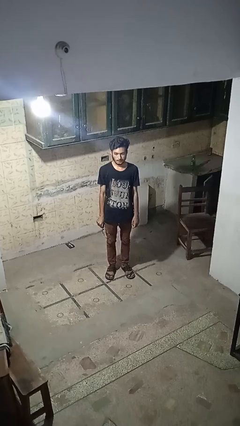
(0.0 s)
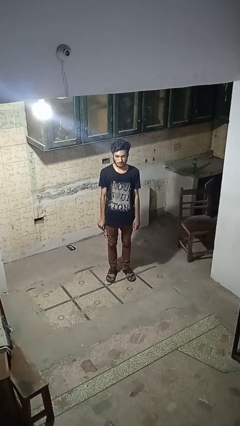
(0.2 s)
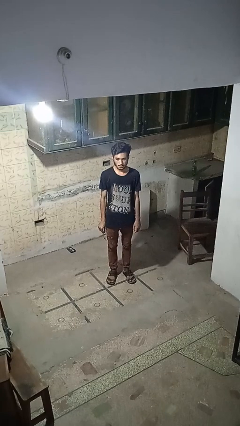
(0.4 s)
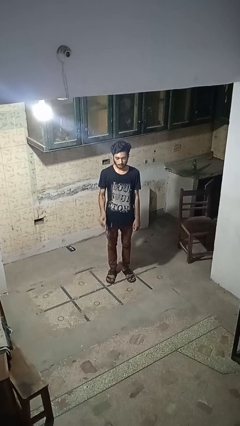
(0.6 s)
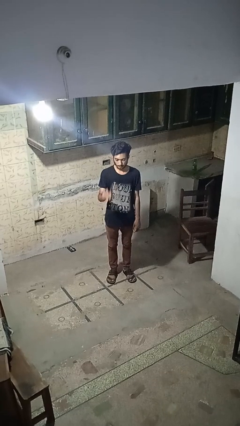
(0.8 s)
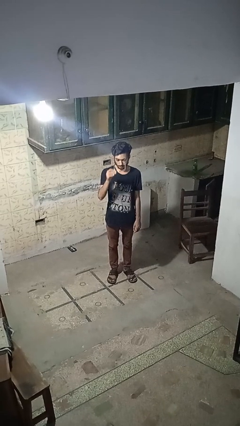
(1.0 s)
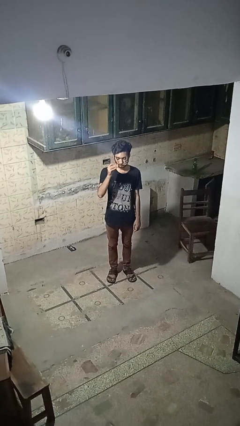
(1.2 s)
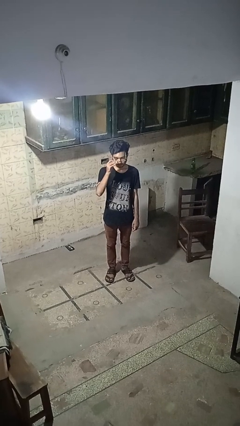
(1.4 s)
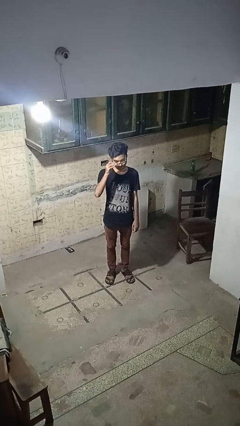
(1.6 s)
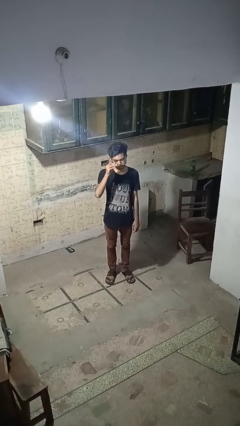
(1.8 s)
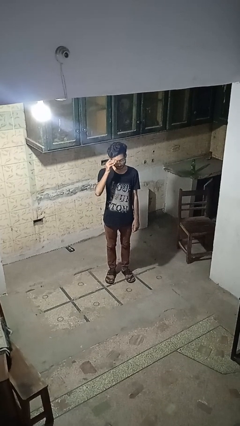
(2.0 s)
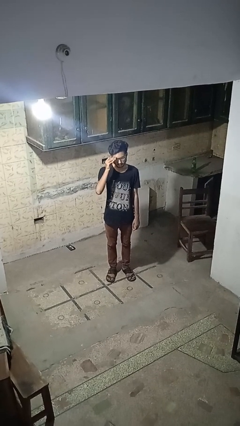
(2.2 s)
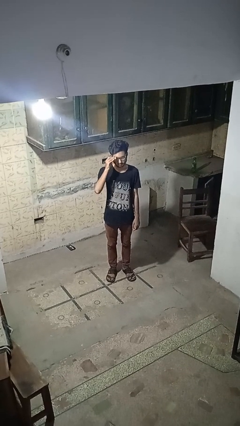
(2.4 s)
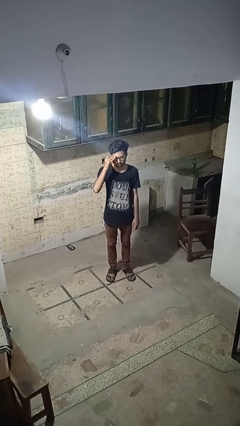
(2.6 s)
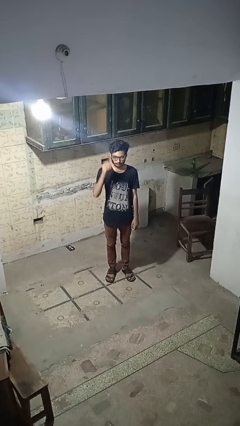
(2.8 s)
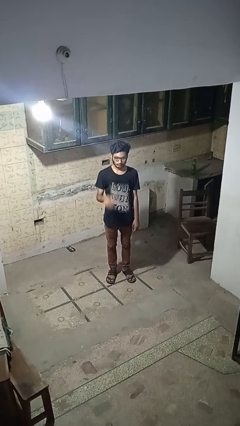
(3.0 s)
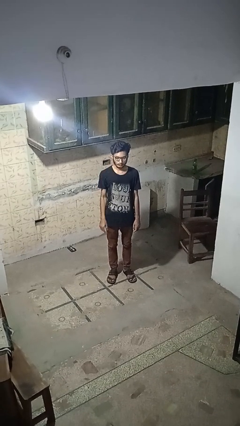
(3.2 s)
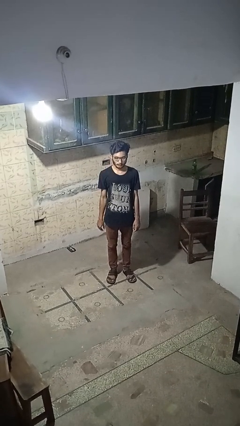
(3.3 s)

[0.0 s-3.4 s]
person puts on glasses

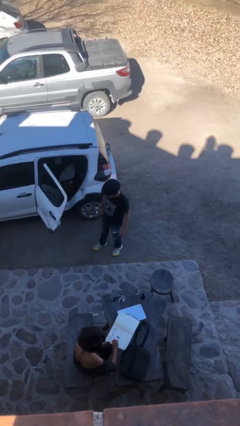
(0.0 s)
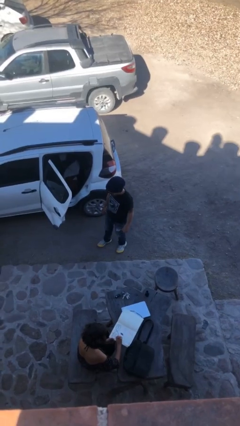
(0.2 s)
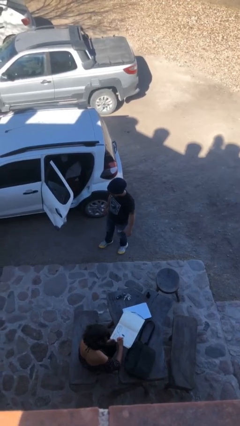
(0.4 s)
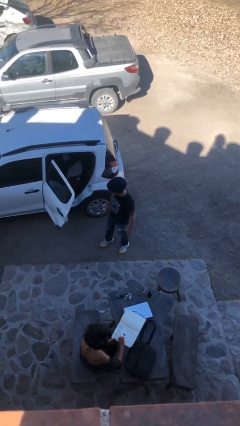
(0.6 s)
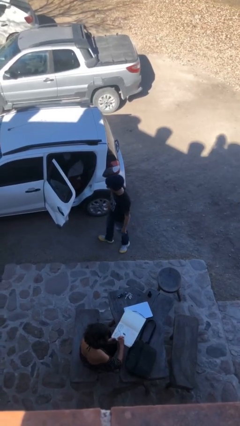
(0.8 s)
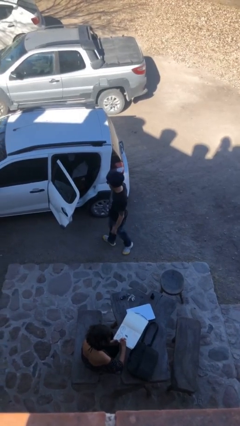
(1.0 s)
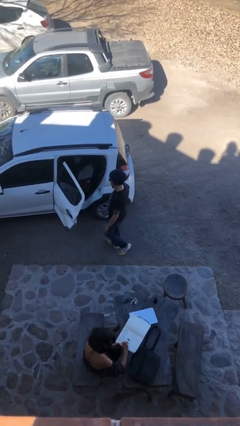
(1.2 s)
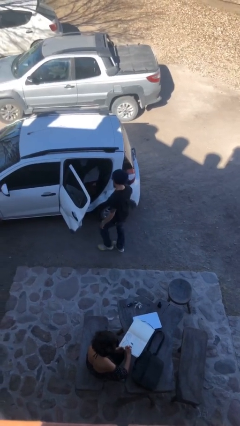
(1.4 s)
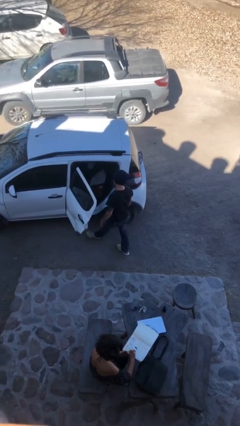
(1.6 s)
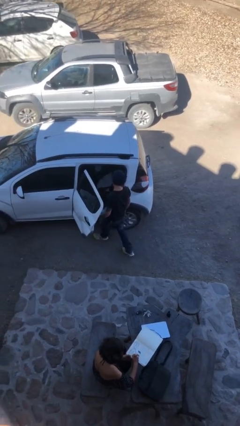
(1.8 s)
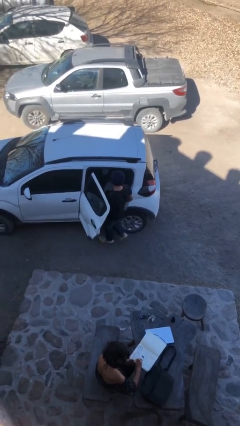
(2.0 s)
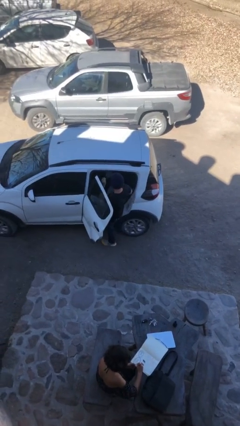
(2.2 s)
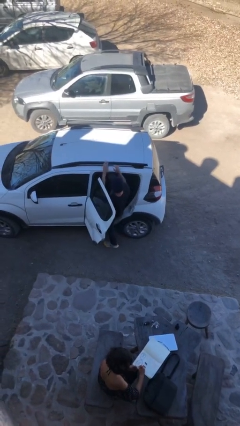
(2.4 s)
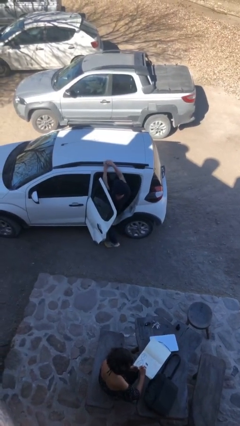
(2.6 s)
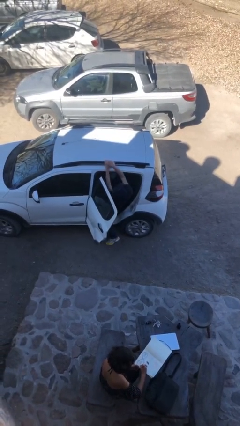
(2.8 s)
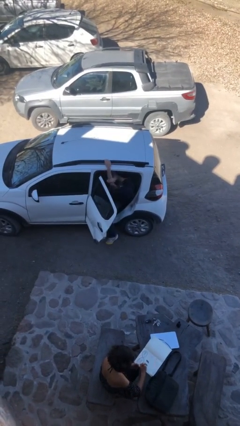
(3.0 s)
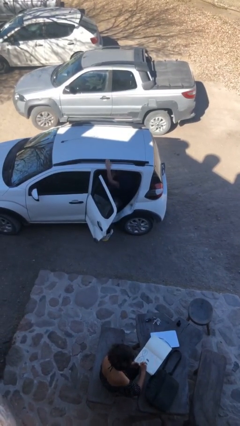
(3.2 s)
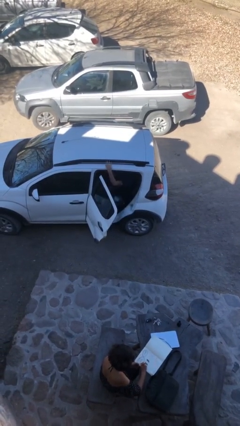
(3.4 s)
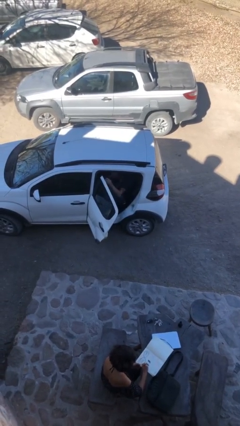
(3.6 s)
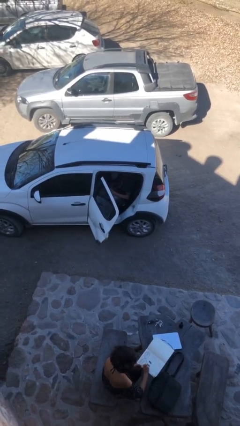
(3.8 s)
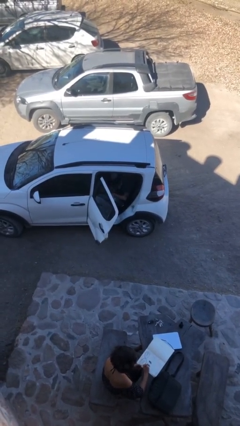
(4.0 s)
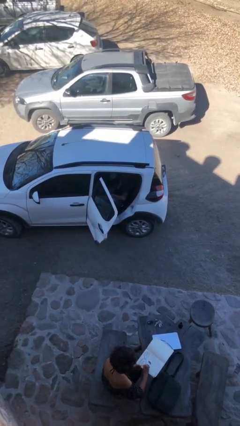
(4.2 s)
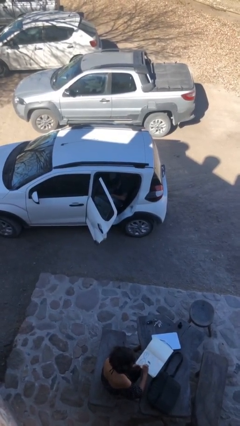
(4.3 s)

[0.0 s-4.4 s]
person enters car

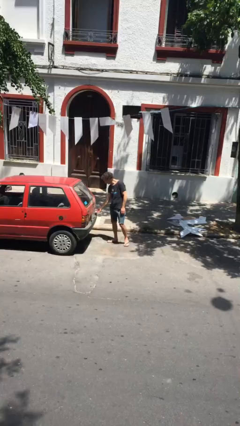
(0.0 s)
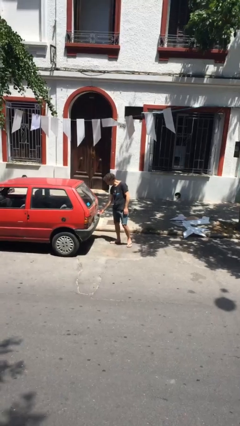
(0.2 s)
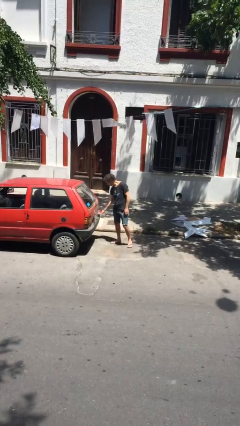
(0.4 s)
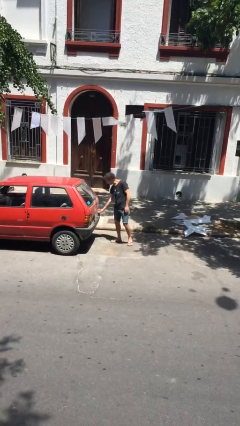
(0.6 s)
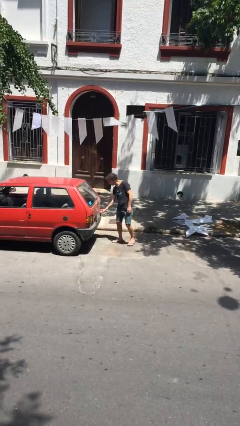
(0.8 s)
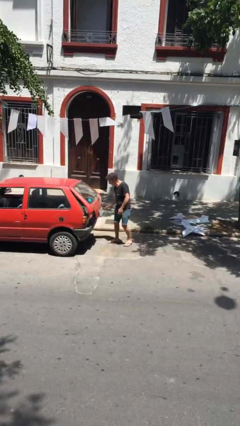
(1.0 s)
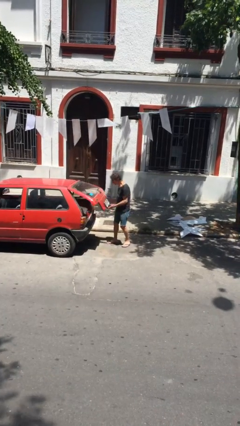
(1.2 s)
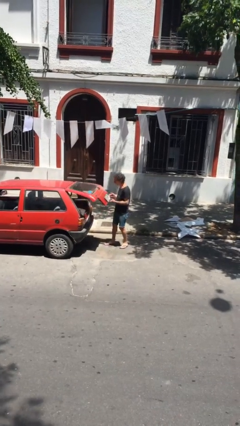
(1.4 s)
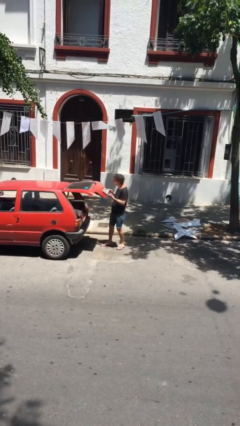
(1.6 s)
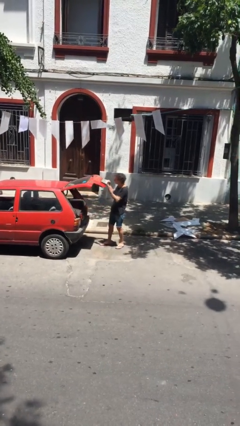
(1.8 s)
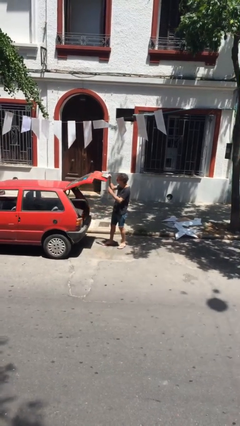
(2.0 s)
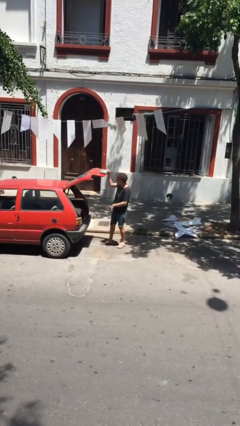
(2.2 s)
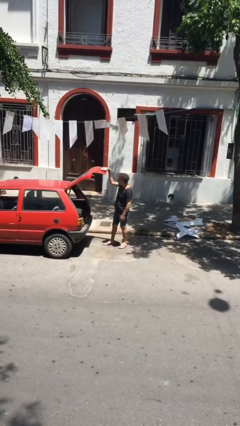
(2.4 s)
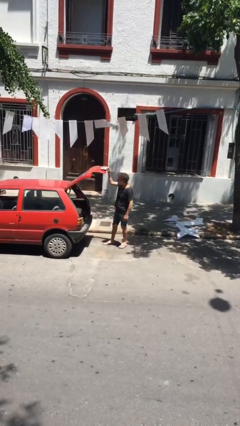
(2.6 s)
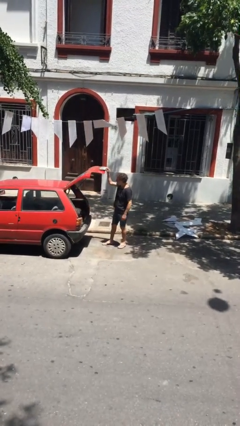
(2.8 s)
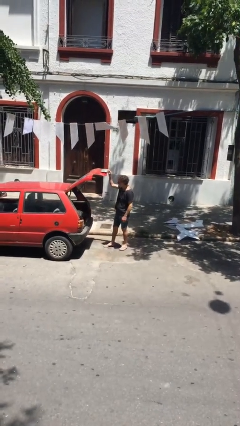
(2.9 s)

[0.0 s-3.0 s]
person opens car trunk

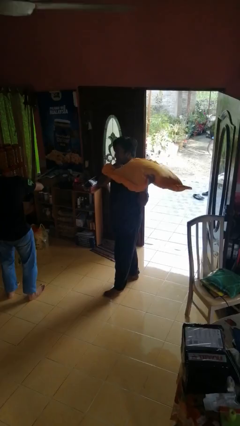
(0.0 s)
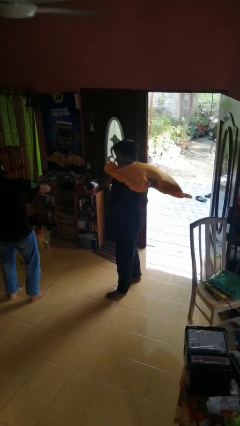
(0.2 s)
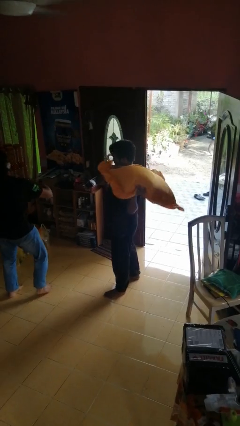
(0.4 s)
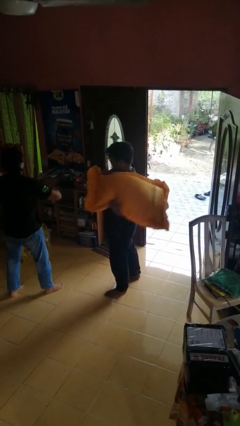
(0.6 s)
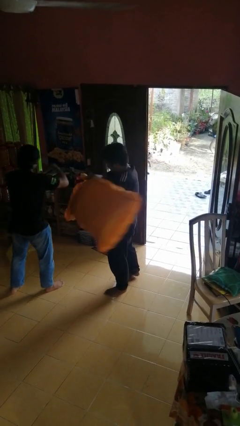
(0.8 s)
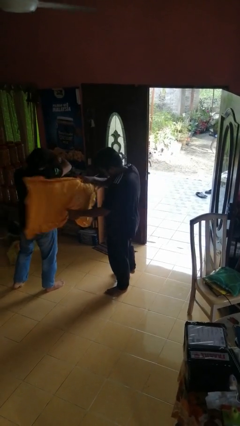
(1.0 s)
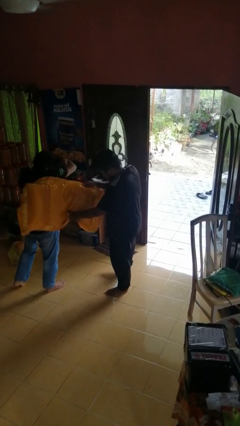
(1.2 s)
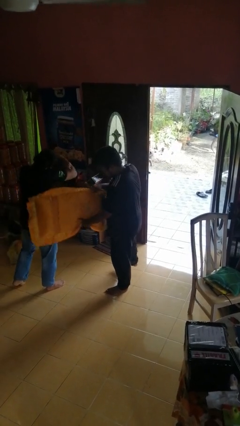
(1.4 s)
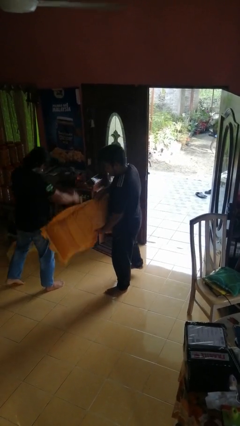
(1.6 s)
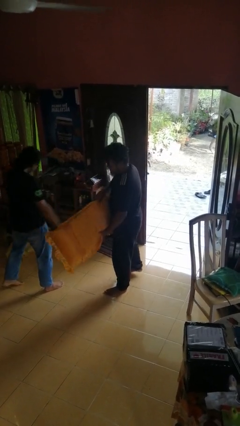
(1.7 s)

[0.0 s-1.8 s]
person hits person with pillow

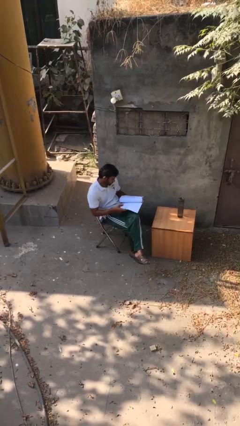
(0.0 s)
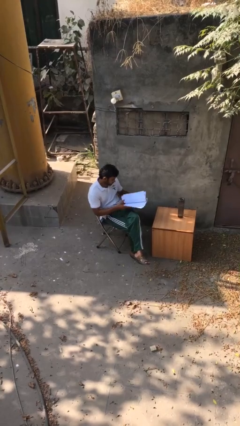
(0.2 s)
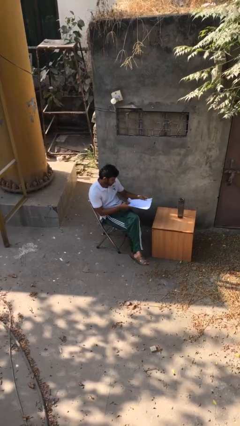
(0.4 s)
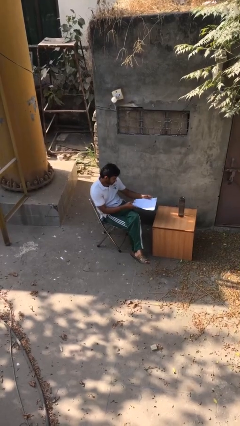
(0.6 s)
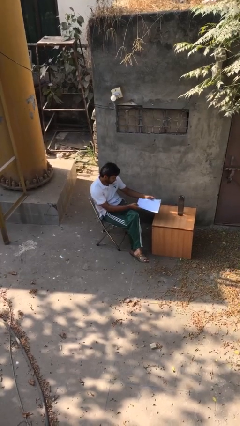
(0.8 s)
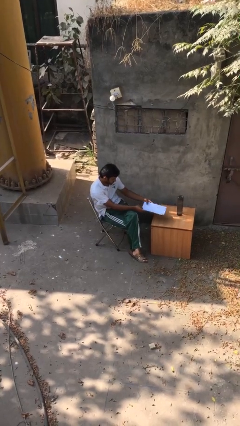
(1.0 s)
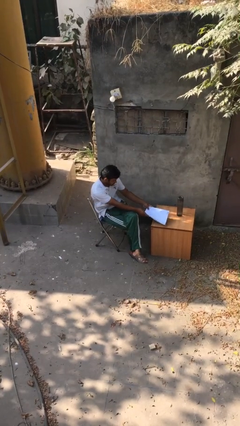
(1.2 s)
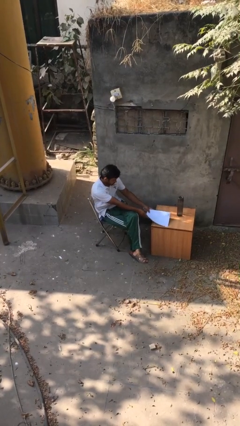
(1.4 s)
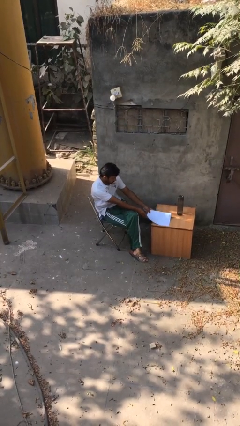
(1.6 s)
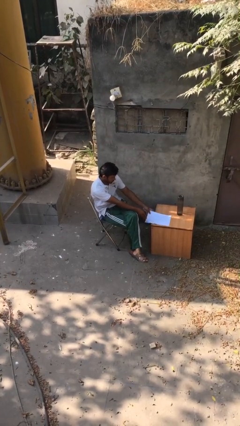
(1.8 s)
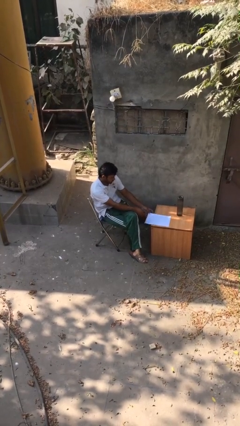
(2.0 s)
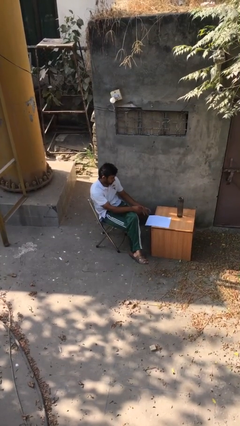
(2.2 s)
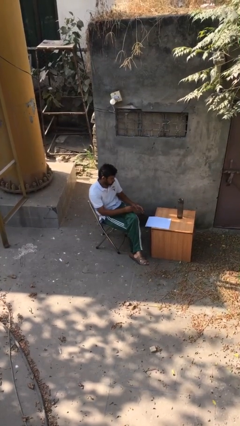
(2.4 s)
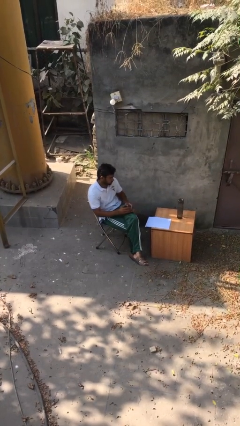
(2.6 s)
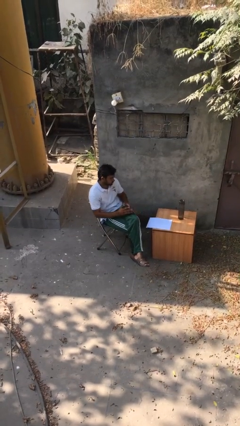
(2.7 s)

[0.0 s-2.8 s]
person puts down object on table

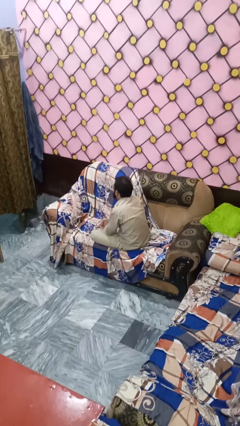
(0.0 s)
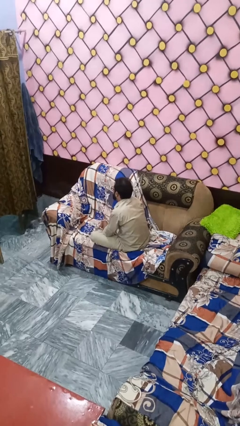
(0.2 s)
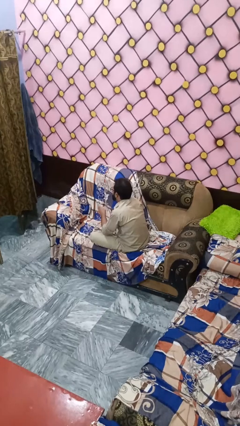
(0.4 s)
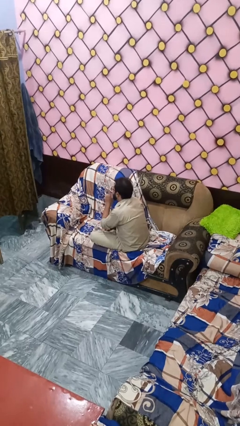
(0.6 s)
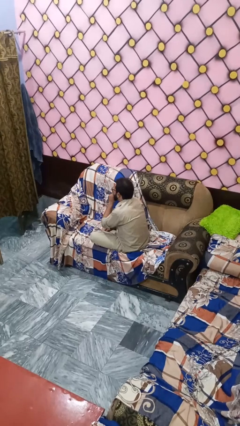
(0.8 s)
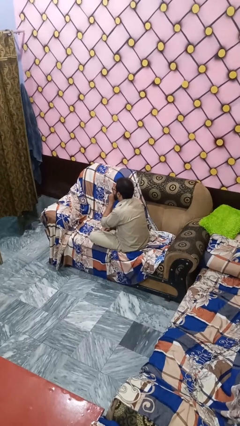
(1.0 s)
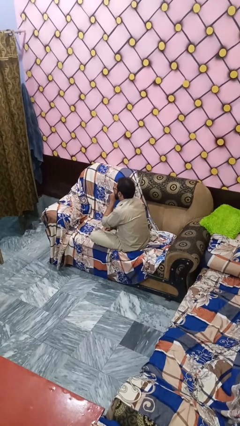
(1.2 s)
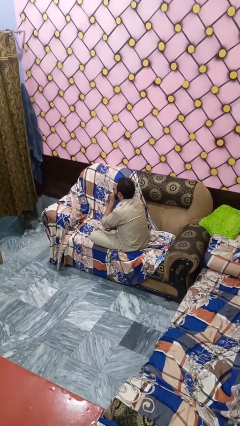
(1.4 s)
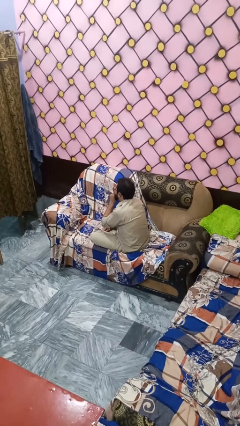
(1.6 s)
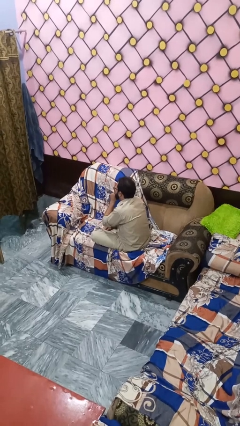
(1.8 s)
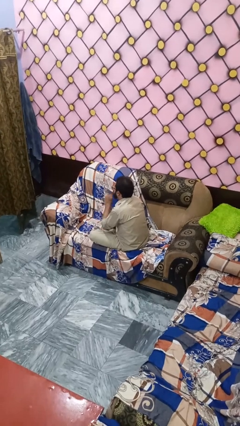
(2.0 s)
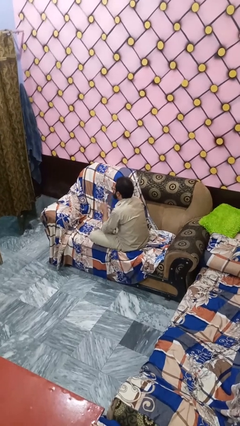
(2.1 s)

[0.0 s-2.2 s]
person gestures be quiet
